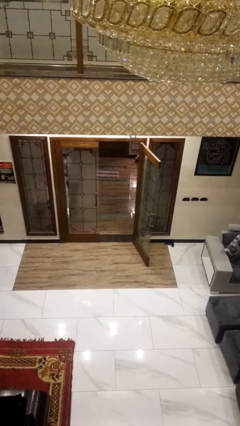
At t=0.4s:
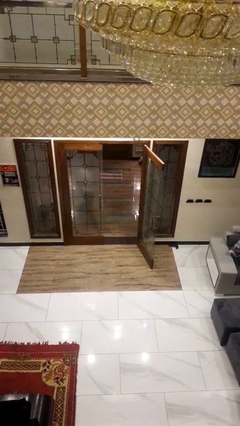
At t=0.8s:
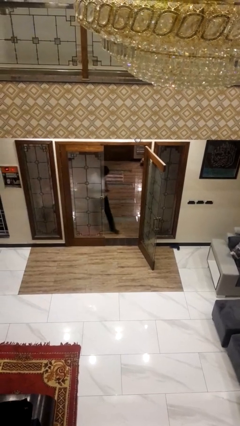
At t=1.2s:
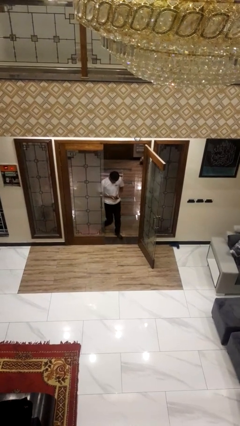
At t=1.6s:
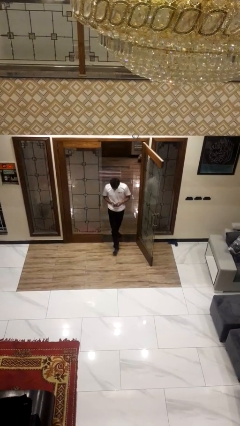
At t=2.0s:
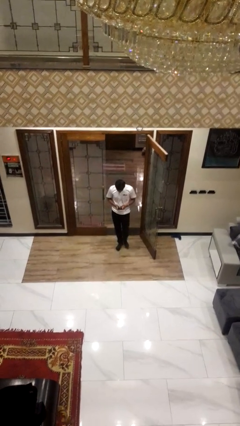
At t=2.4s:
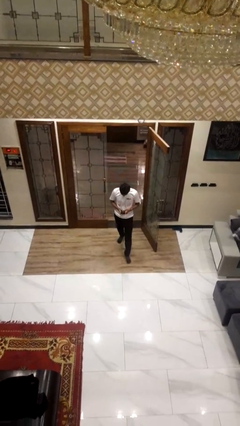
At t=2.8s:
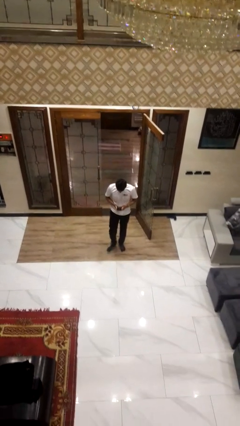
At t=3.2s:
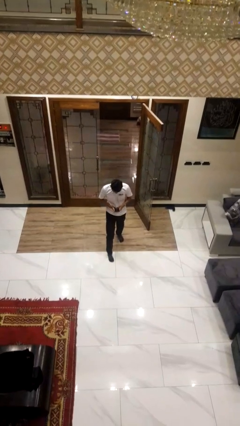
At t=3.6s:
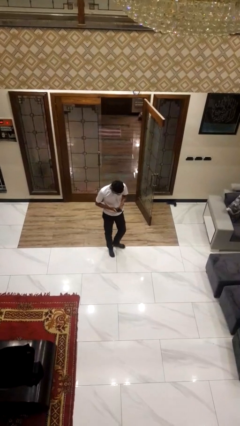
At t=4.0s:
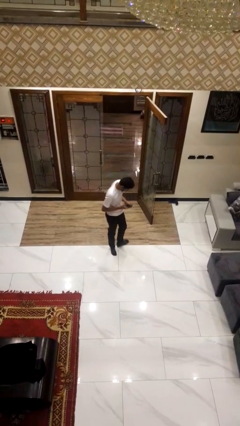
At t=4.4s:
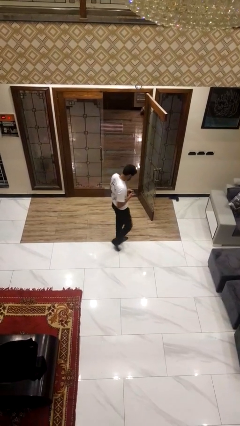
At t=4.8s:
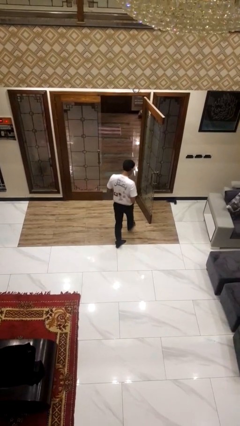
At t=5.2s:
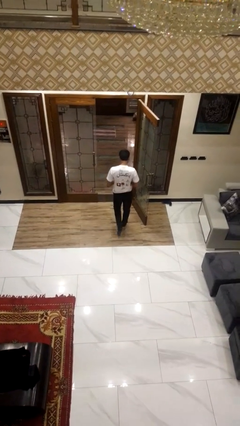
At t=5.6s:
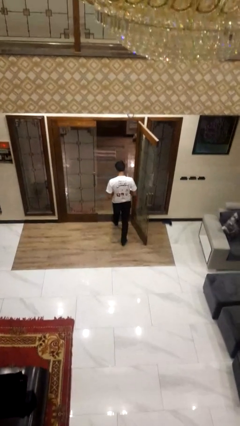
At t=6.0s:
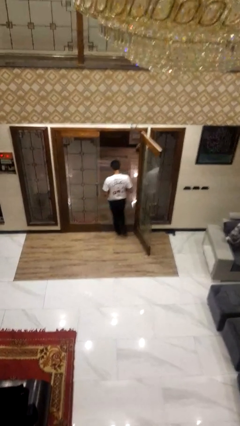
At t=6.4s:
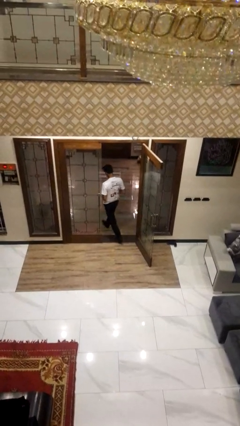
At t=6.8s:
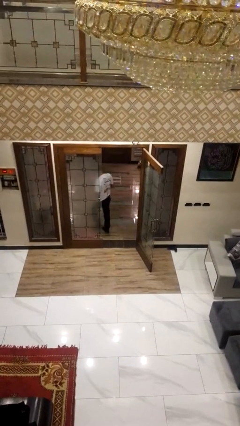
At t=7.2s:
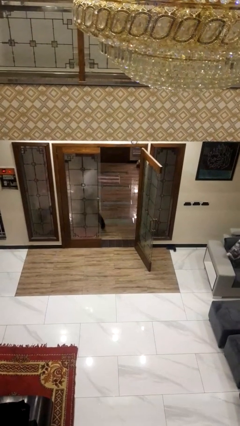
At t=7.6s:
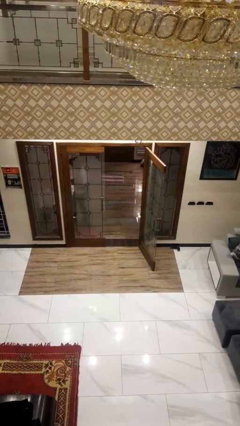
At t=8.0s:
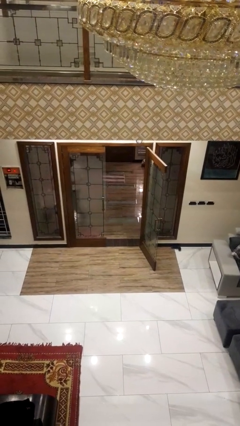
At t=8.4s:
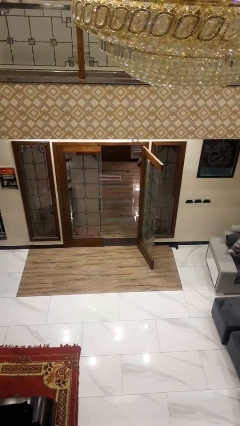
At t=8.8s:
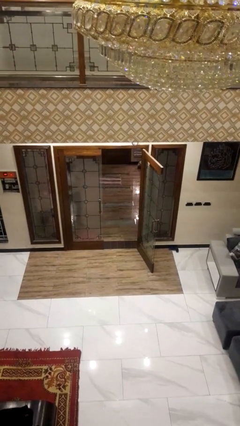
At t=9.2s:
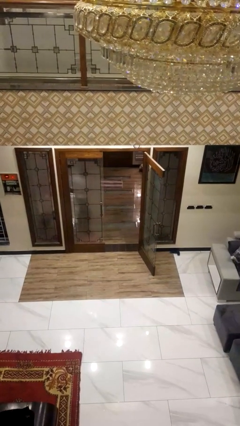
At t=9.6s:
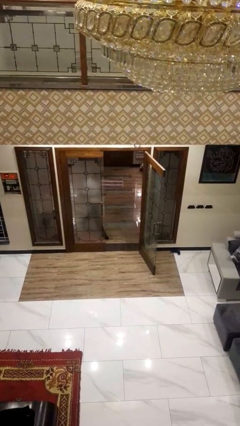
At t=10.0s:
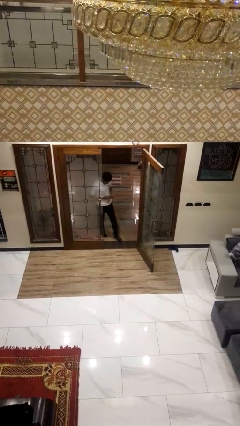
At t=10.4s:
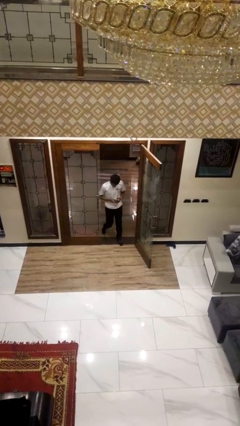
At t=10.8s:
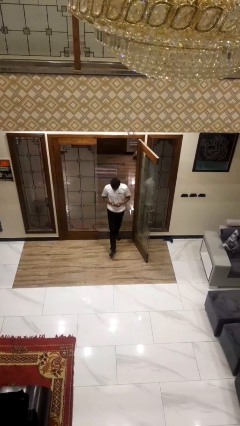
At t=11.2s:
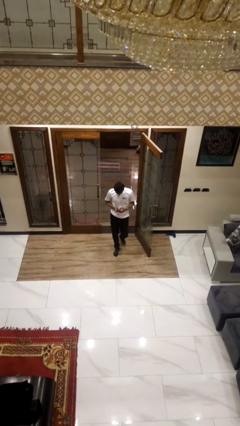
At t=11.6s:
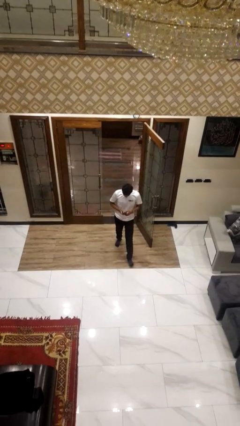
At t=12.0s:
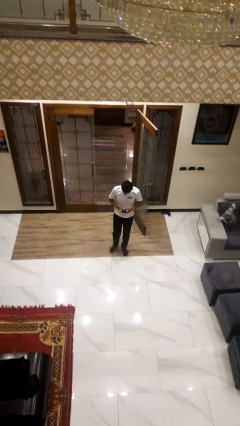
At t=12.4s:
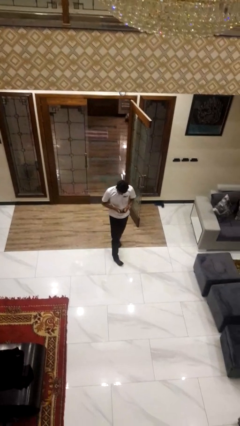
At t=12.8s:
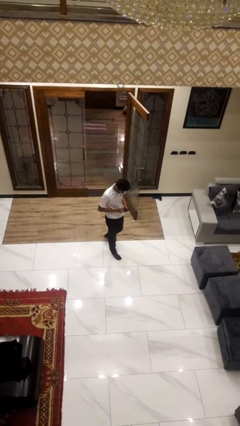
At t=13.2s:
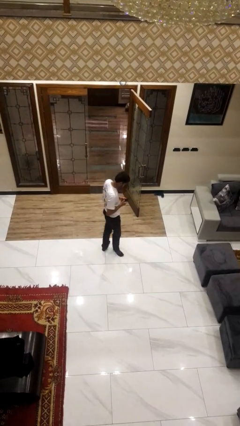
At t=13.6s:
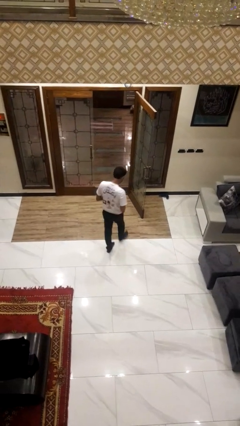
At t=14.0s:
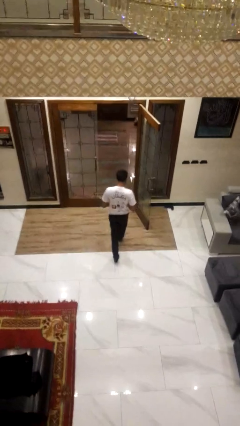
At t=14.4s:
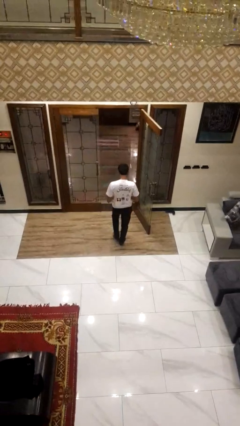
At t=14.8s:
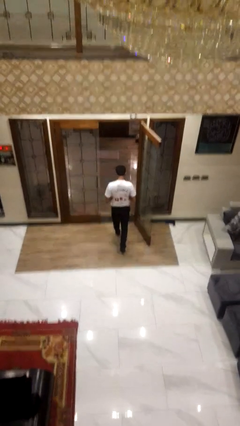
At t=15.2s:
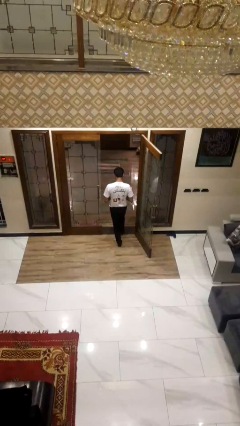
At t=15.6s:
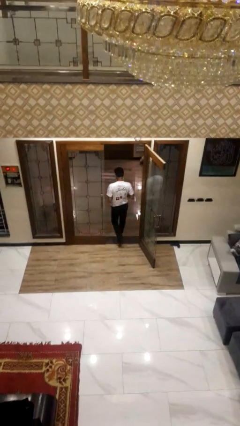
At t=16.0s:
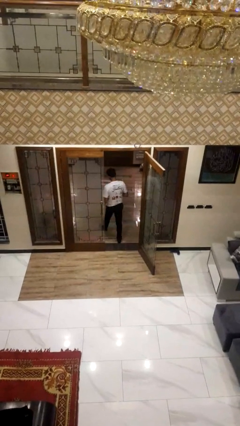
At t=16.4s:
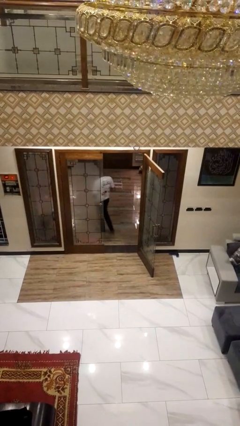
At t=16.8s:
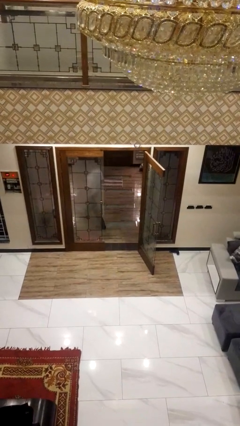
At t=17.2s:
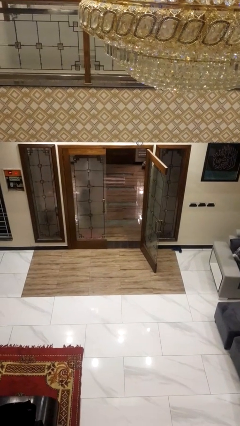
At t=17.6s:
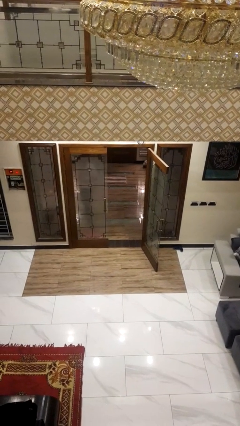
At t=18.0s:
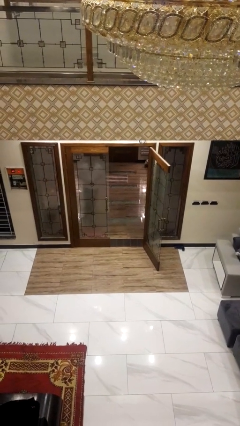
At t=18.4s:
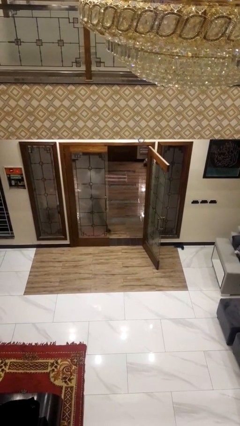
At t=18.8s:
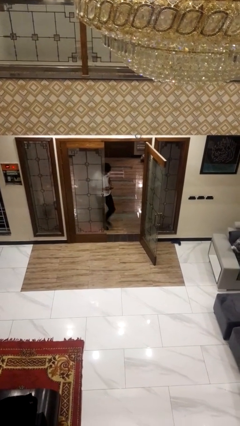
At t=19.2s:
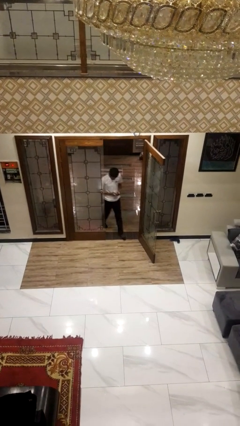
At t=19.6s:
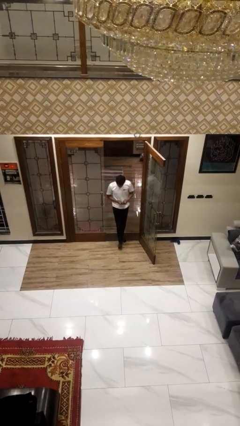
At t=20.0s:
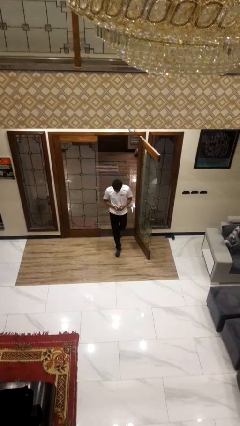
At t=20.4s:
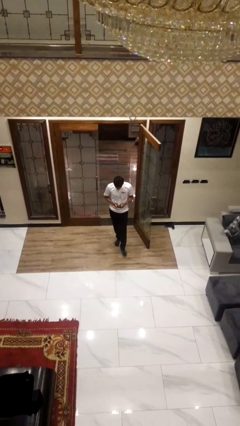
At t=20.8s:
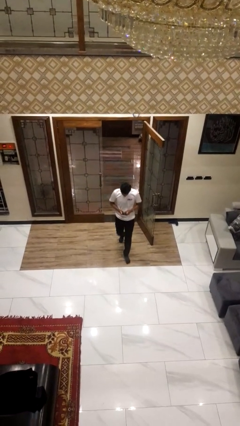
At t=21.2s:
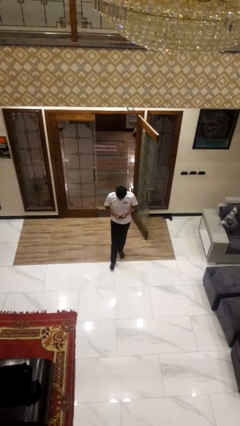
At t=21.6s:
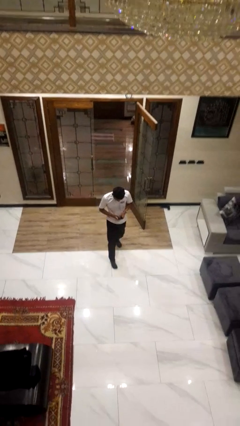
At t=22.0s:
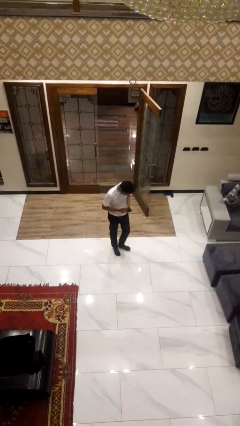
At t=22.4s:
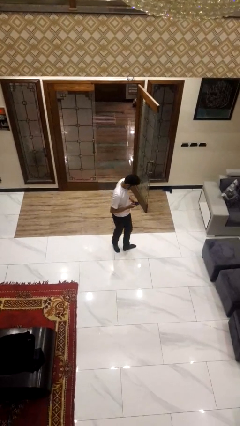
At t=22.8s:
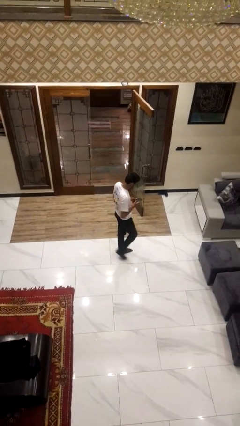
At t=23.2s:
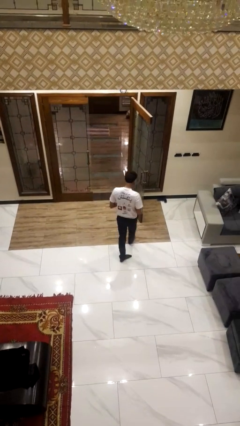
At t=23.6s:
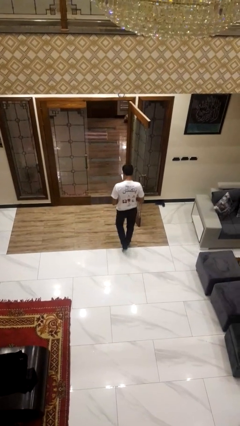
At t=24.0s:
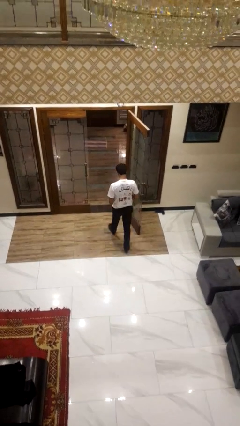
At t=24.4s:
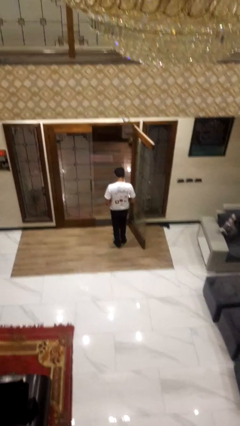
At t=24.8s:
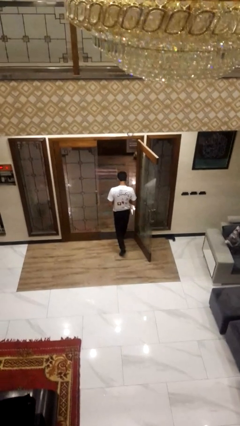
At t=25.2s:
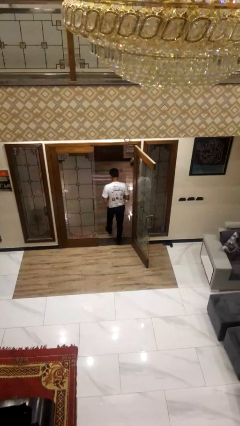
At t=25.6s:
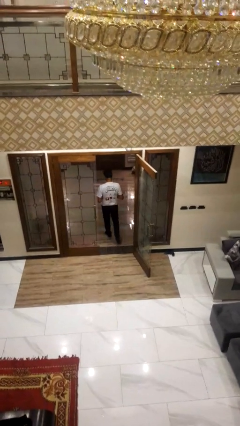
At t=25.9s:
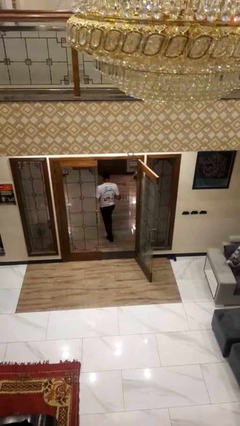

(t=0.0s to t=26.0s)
person texts on phone

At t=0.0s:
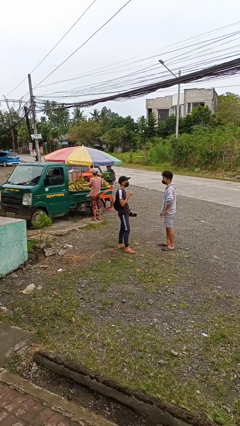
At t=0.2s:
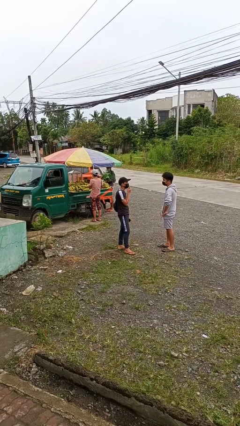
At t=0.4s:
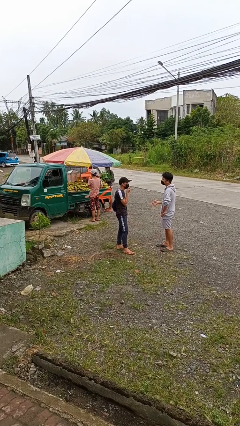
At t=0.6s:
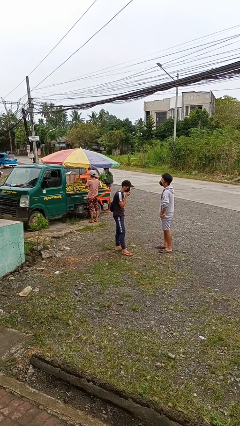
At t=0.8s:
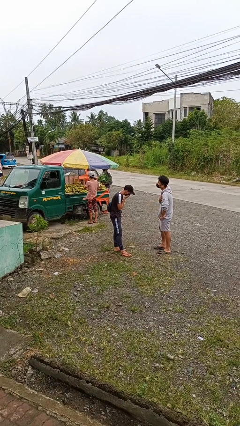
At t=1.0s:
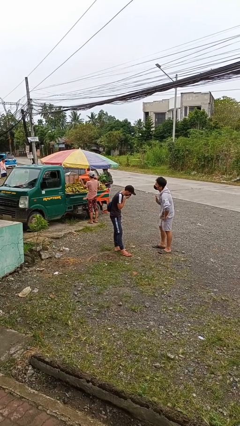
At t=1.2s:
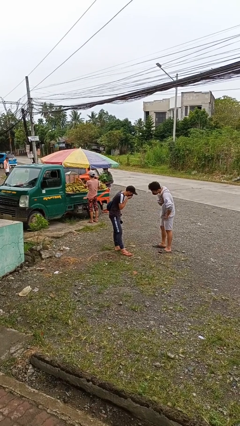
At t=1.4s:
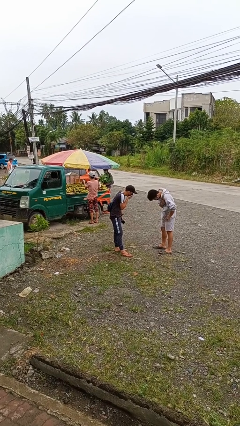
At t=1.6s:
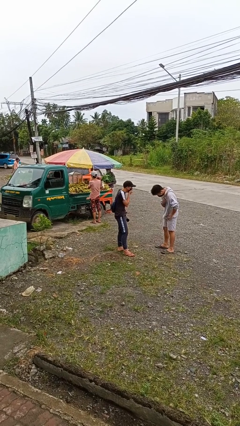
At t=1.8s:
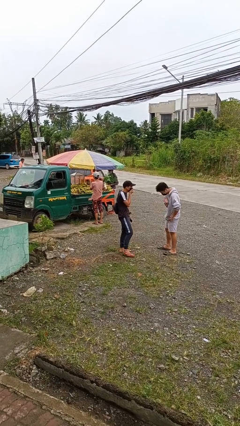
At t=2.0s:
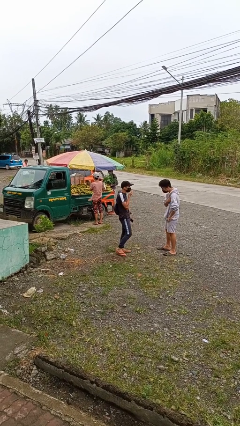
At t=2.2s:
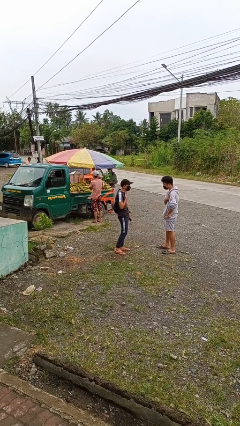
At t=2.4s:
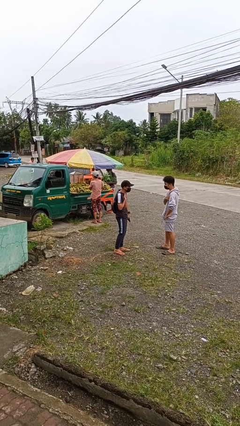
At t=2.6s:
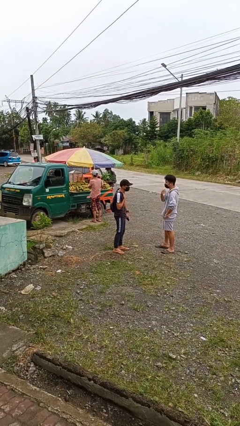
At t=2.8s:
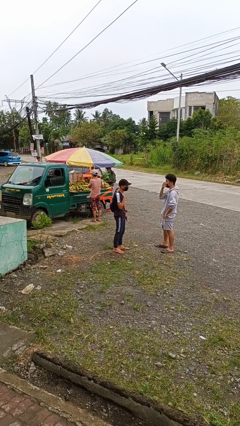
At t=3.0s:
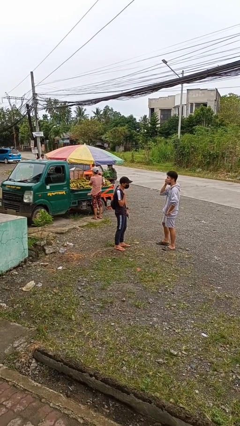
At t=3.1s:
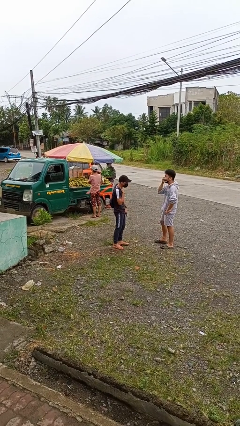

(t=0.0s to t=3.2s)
person laughs with person

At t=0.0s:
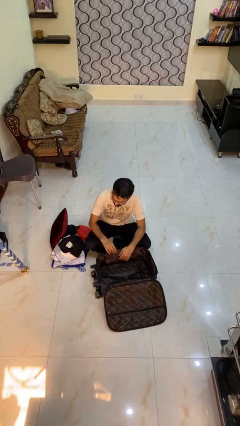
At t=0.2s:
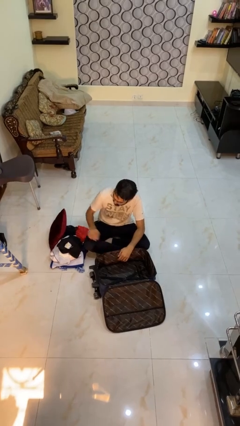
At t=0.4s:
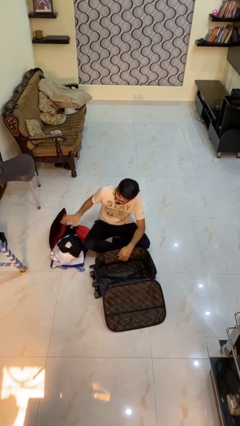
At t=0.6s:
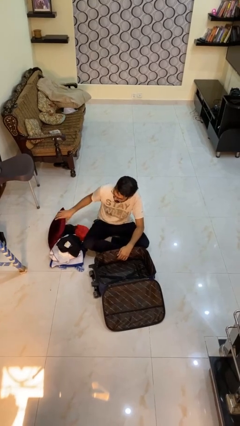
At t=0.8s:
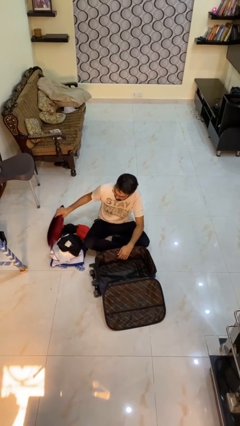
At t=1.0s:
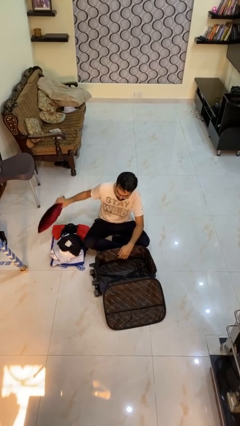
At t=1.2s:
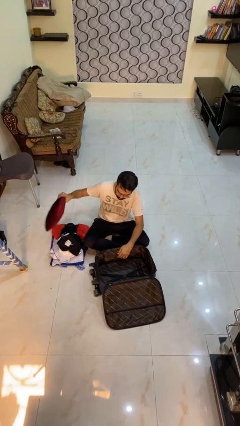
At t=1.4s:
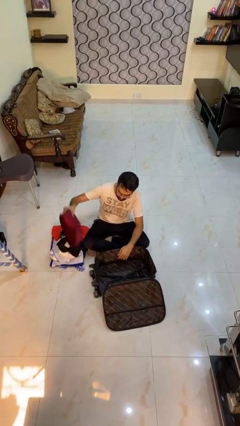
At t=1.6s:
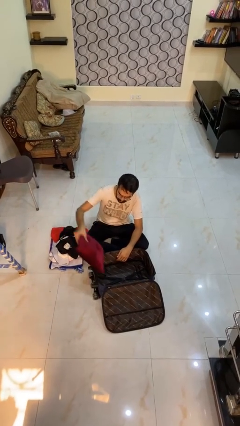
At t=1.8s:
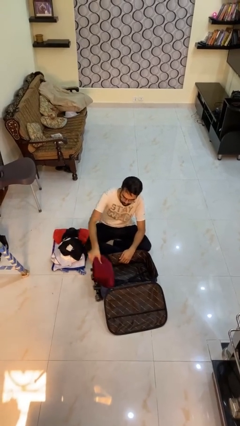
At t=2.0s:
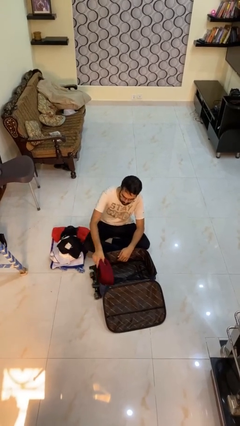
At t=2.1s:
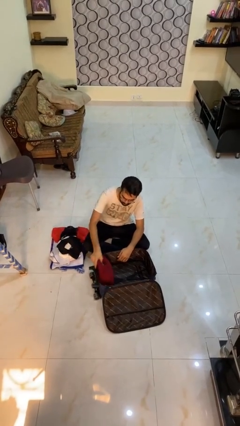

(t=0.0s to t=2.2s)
person loads clothes into suitcase
